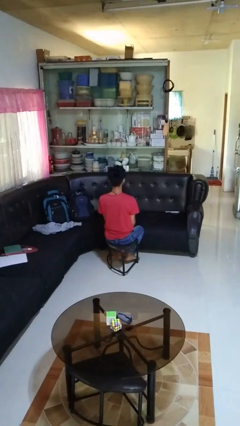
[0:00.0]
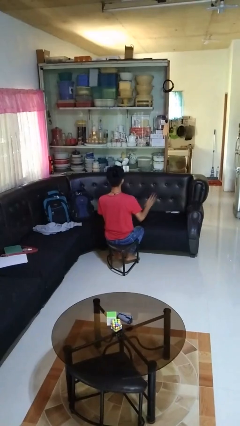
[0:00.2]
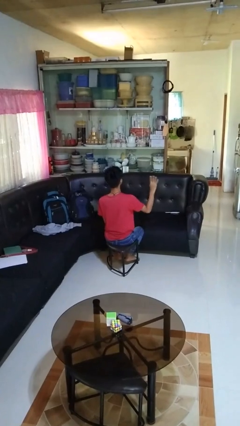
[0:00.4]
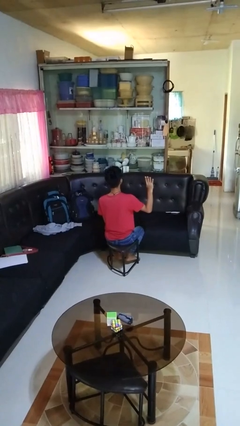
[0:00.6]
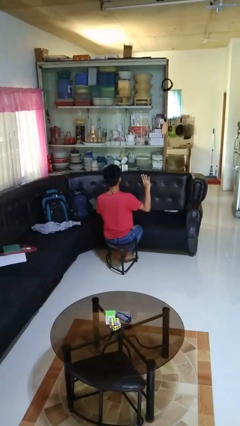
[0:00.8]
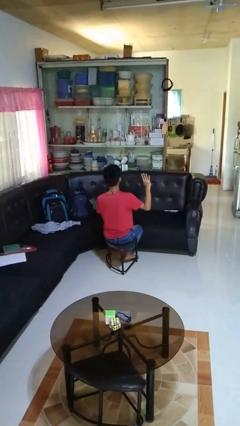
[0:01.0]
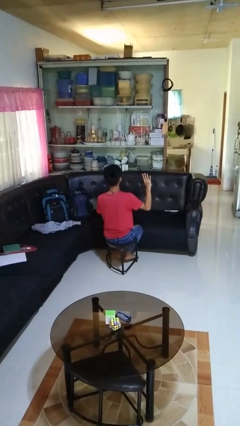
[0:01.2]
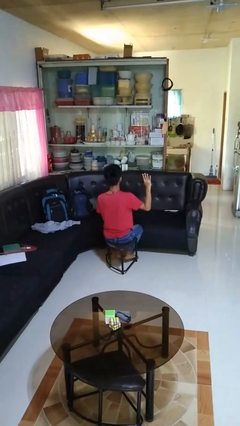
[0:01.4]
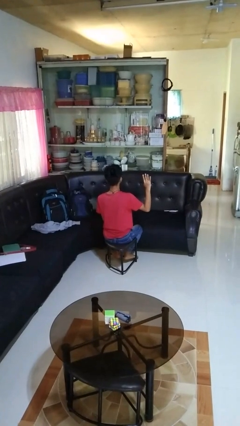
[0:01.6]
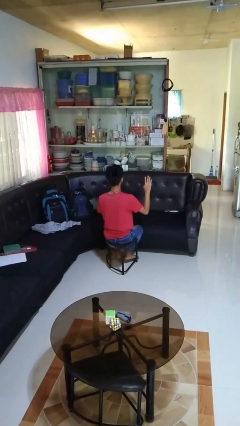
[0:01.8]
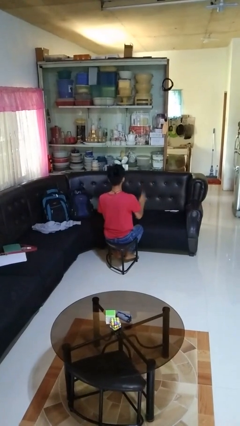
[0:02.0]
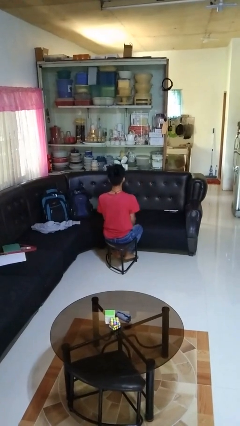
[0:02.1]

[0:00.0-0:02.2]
person gestures number four

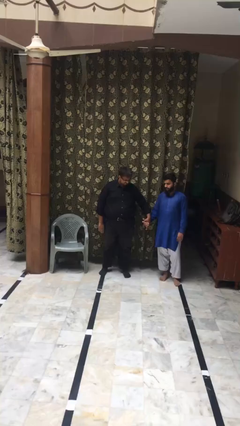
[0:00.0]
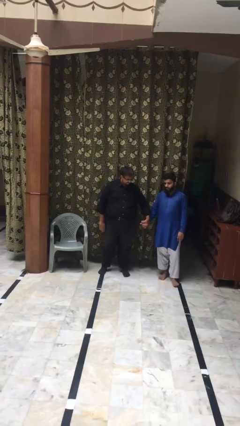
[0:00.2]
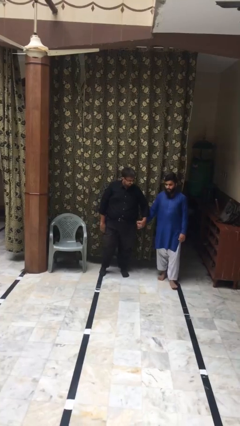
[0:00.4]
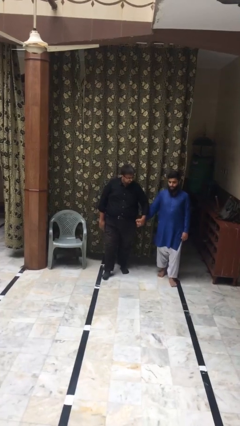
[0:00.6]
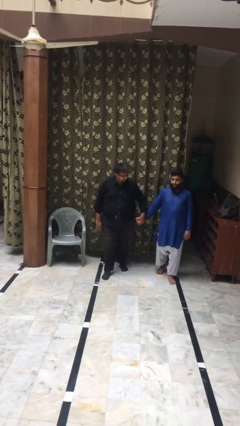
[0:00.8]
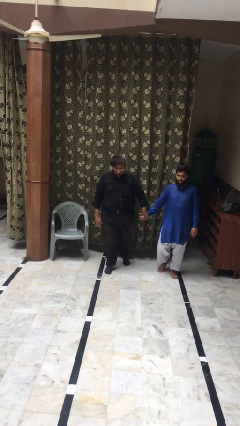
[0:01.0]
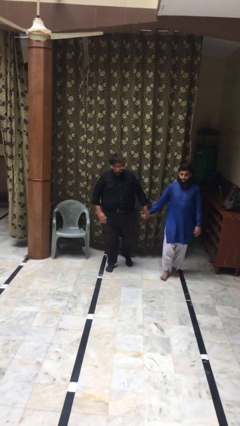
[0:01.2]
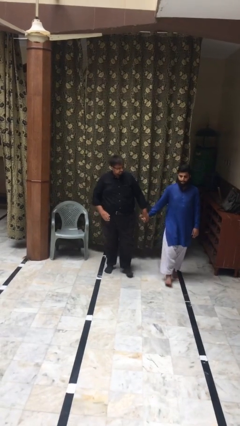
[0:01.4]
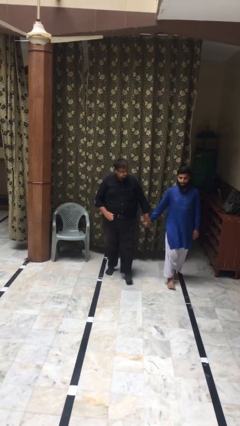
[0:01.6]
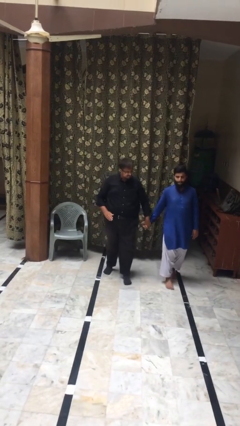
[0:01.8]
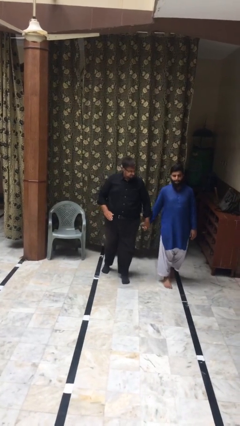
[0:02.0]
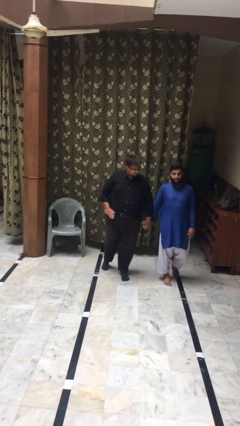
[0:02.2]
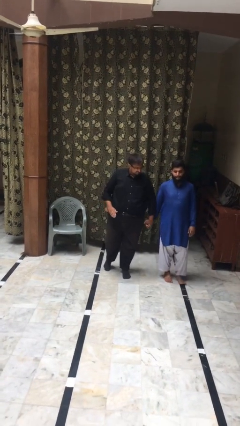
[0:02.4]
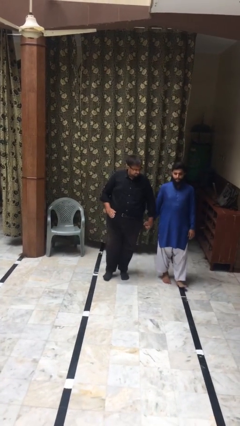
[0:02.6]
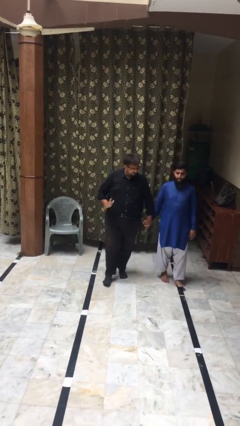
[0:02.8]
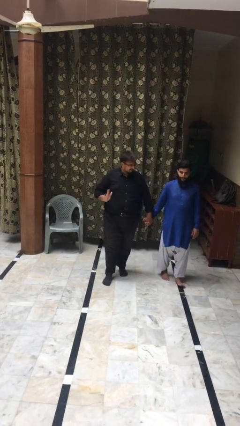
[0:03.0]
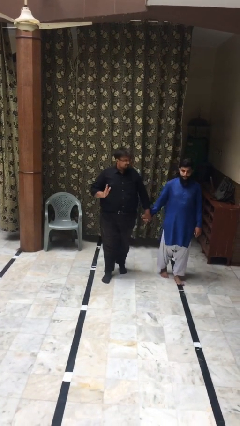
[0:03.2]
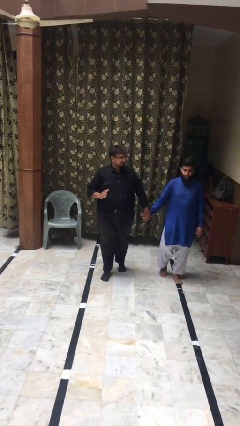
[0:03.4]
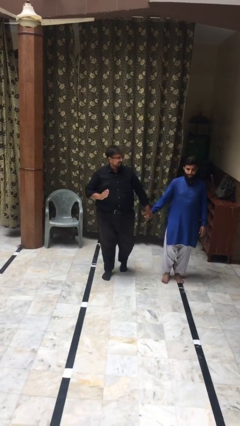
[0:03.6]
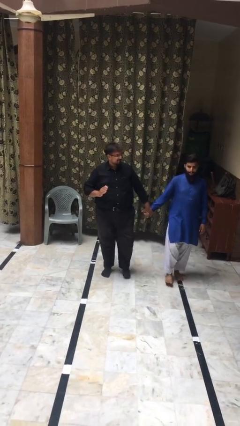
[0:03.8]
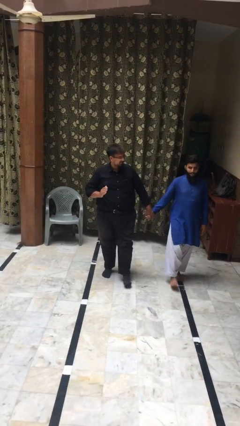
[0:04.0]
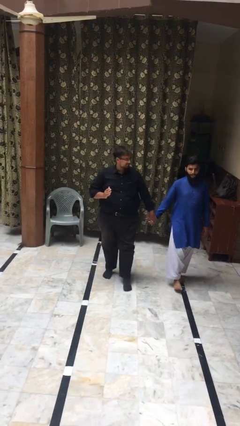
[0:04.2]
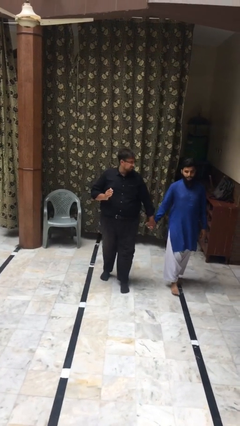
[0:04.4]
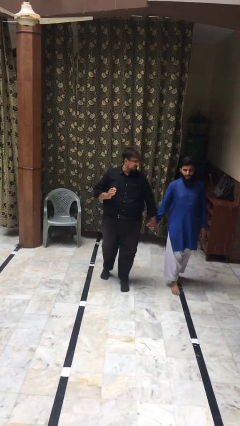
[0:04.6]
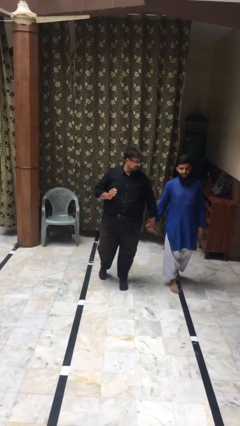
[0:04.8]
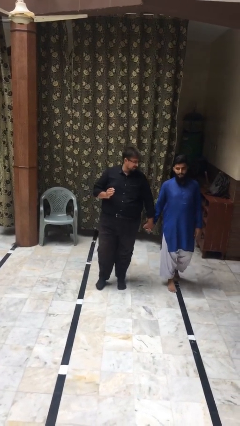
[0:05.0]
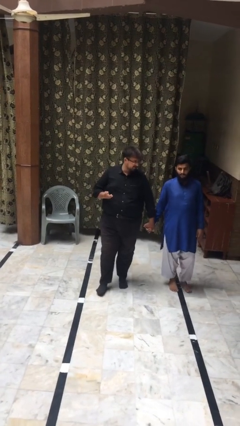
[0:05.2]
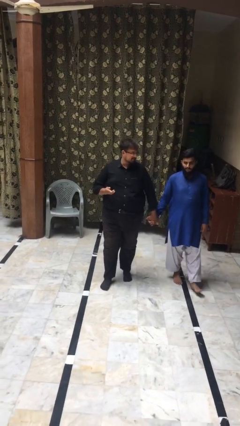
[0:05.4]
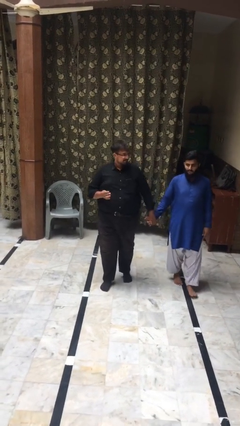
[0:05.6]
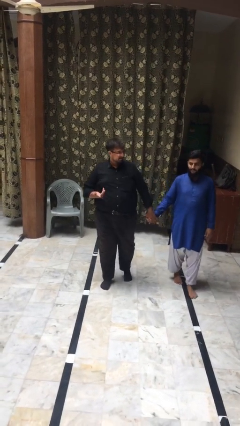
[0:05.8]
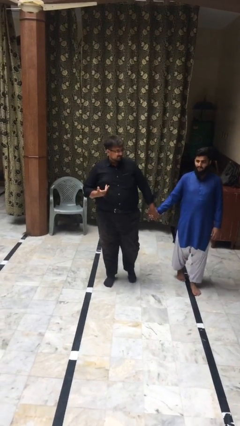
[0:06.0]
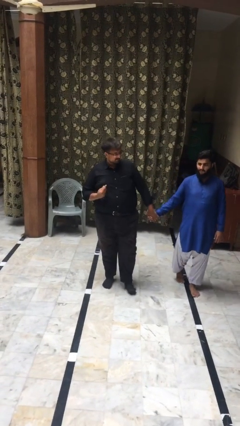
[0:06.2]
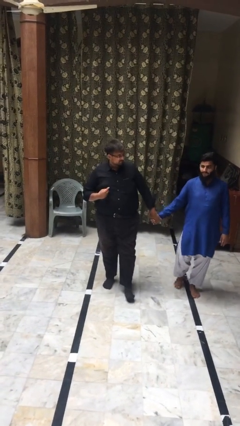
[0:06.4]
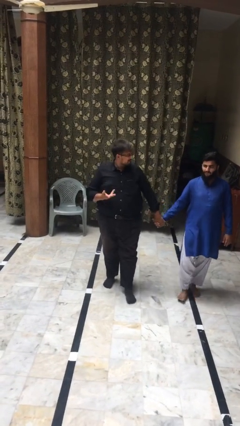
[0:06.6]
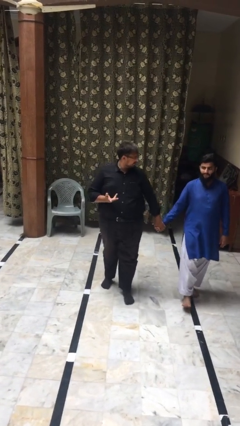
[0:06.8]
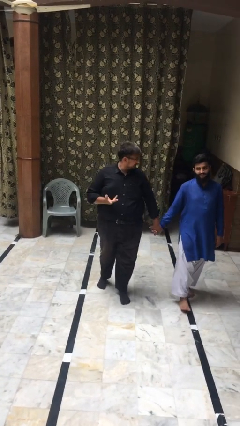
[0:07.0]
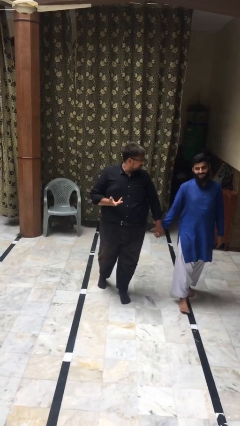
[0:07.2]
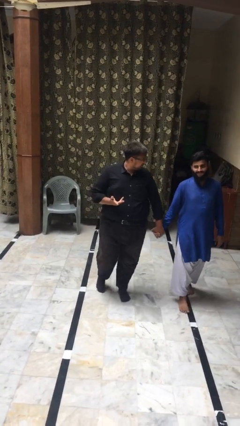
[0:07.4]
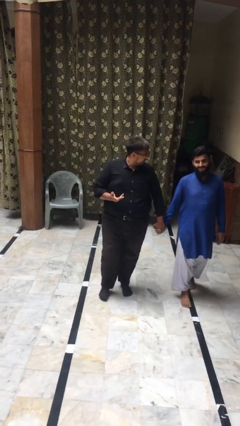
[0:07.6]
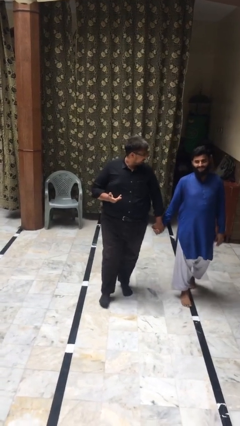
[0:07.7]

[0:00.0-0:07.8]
person holds hand

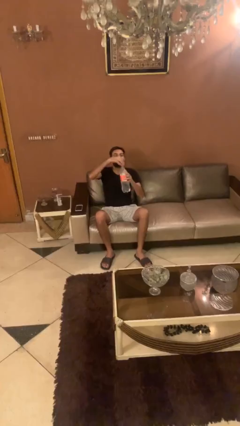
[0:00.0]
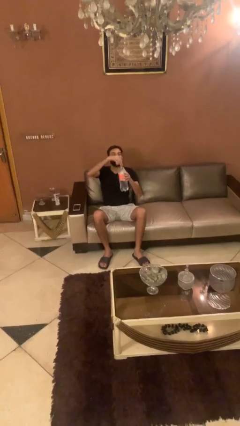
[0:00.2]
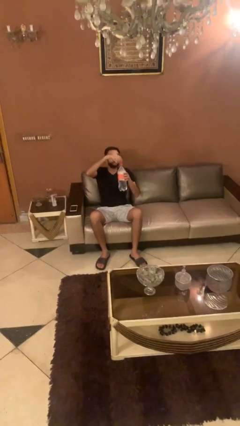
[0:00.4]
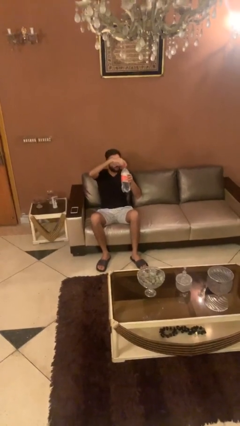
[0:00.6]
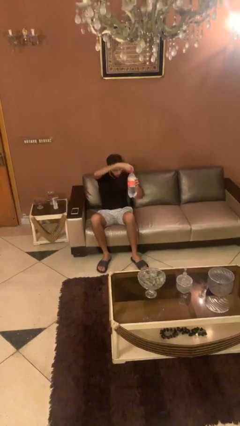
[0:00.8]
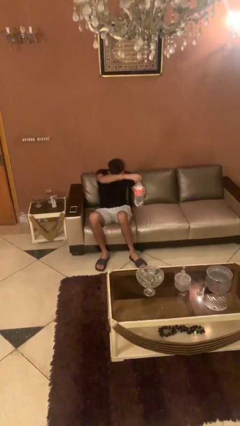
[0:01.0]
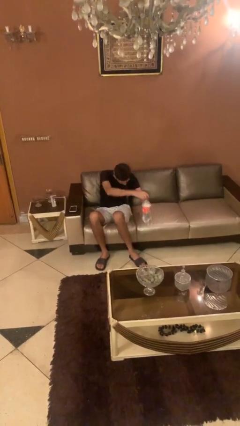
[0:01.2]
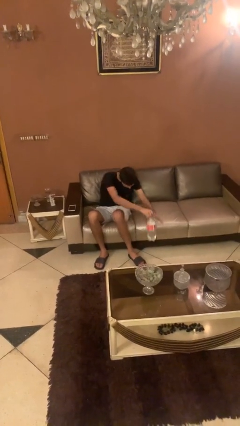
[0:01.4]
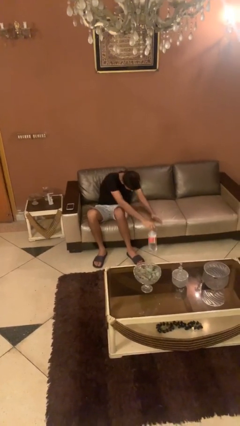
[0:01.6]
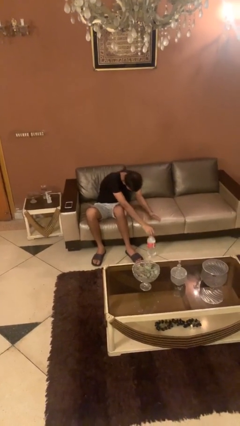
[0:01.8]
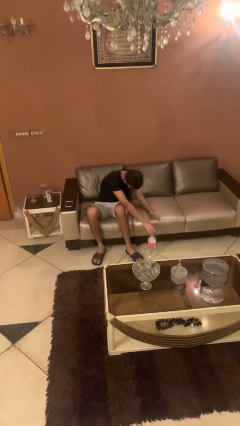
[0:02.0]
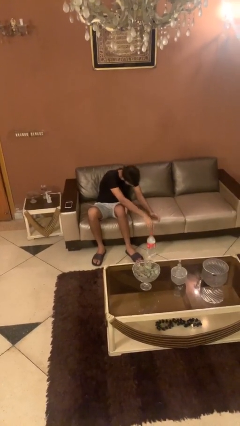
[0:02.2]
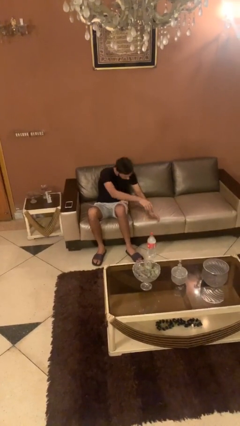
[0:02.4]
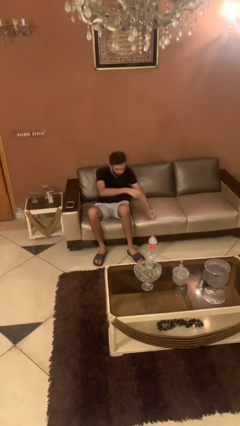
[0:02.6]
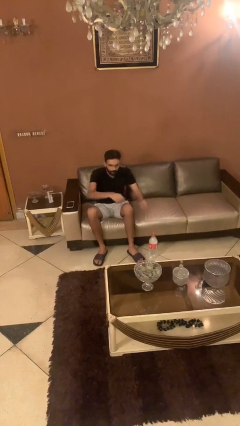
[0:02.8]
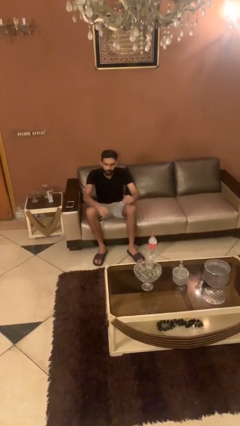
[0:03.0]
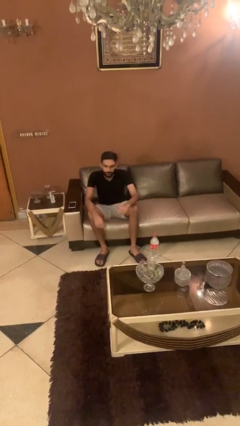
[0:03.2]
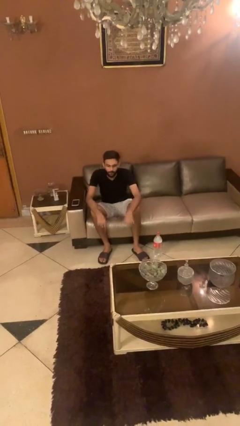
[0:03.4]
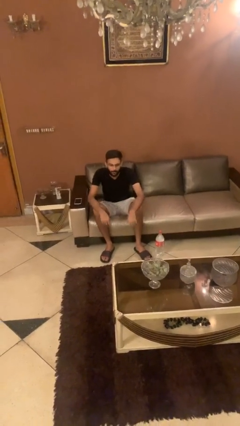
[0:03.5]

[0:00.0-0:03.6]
person puts down object on floor

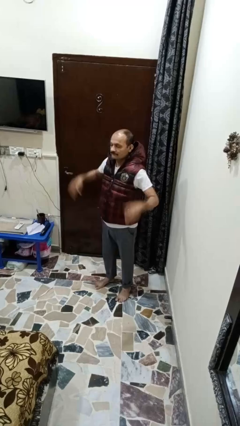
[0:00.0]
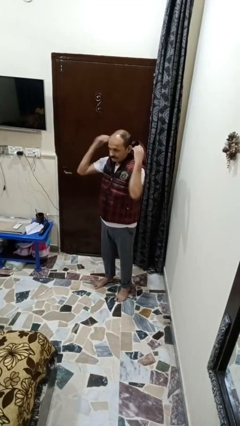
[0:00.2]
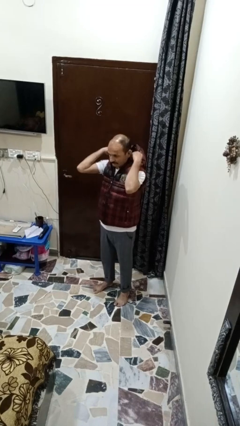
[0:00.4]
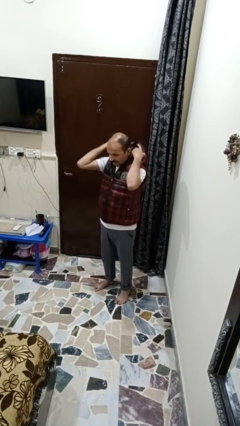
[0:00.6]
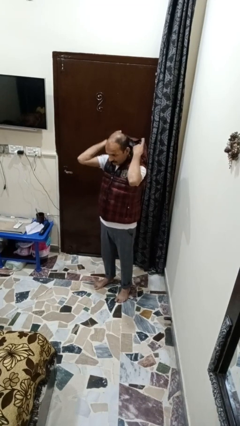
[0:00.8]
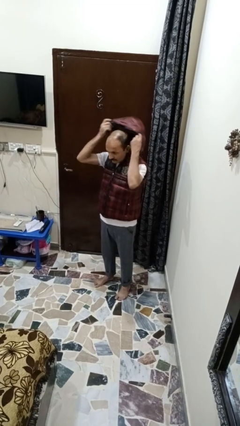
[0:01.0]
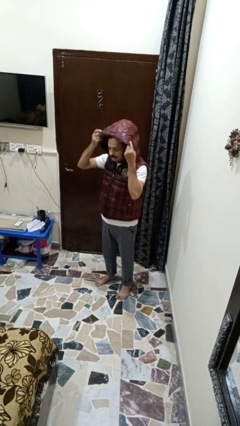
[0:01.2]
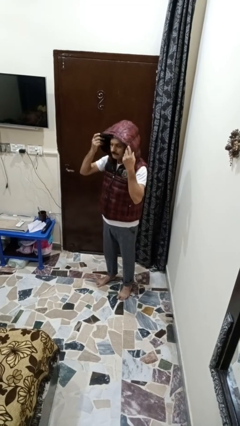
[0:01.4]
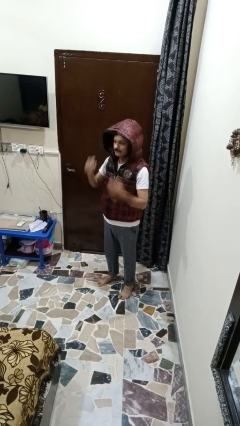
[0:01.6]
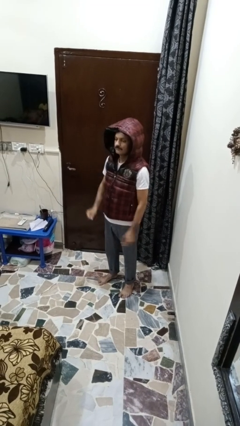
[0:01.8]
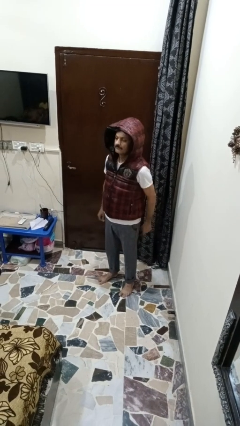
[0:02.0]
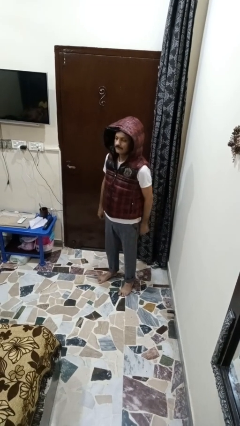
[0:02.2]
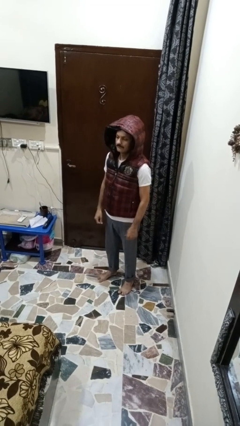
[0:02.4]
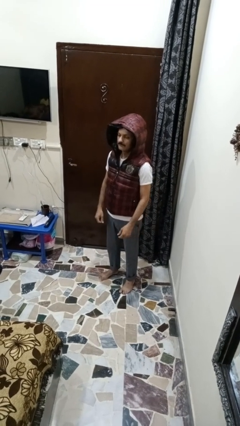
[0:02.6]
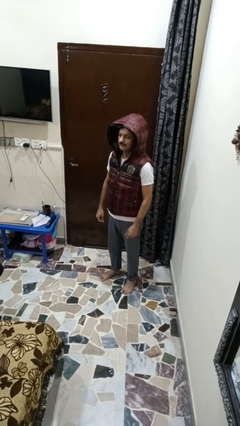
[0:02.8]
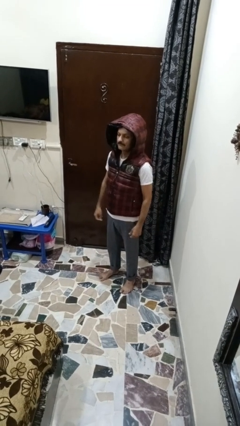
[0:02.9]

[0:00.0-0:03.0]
person puts on hoodie

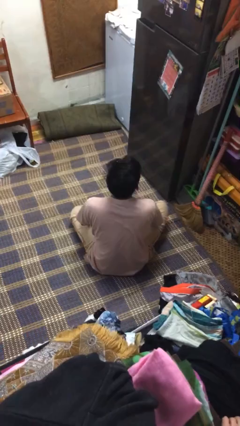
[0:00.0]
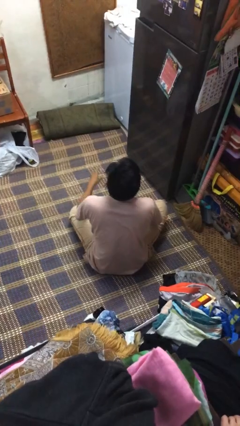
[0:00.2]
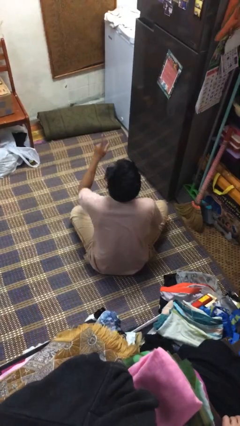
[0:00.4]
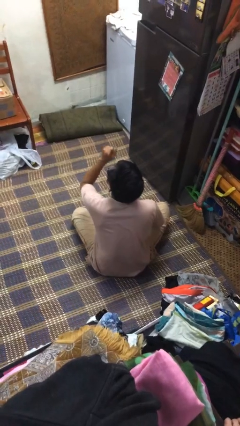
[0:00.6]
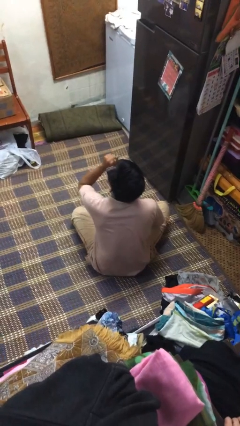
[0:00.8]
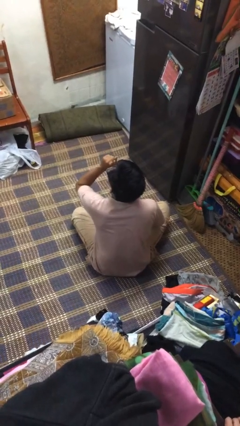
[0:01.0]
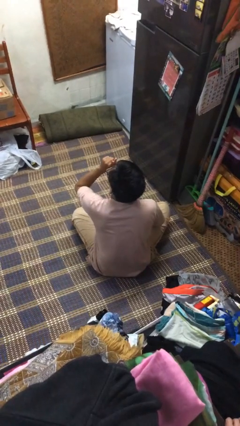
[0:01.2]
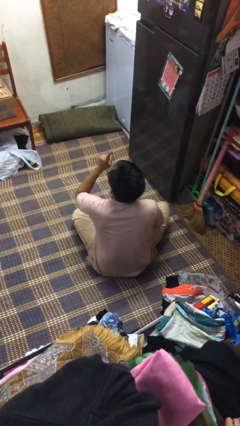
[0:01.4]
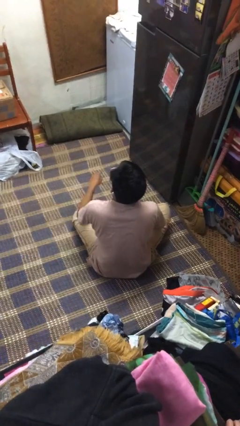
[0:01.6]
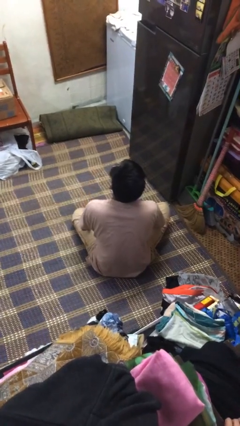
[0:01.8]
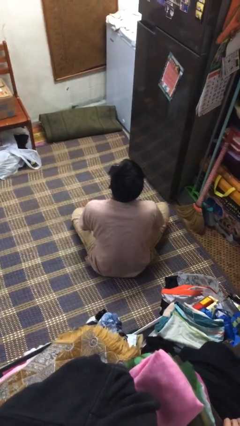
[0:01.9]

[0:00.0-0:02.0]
person gestures be quiet
